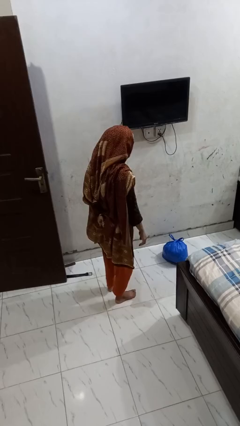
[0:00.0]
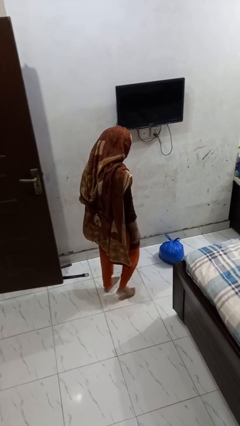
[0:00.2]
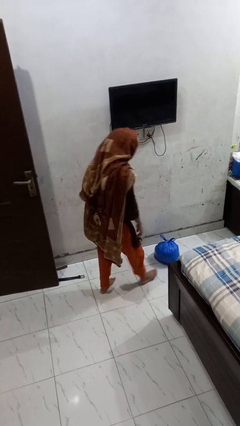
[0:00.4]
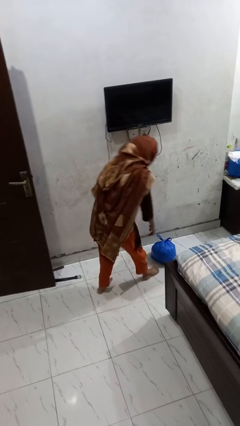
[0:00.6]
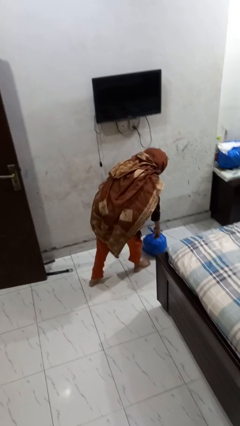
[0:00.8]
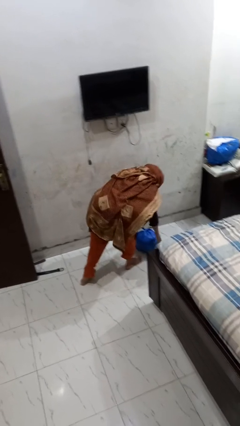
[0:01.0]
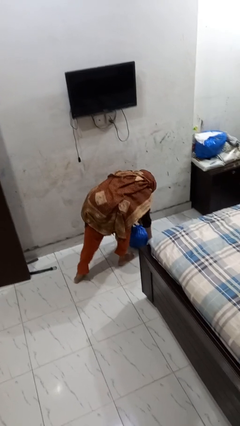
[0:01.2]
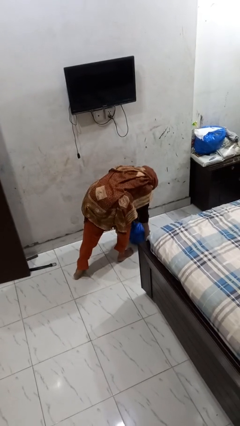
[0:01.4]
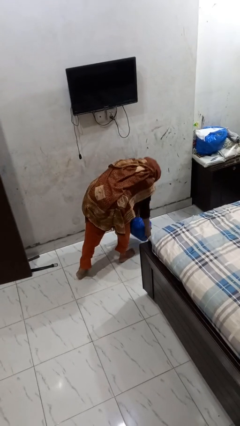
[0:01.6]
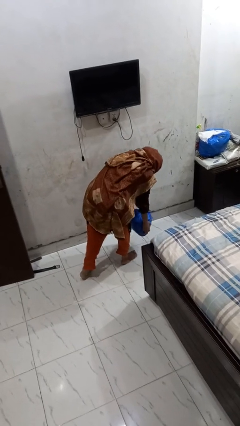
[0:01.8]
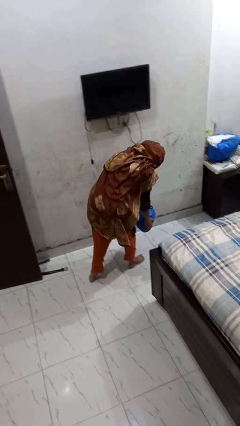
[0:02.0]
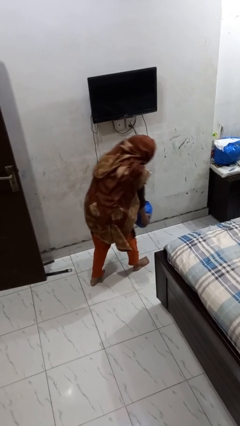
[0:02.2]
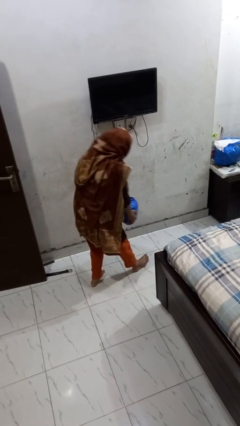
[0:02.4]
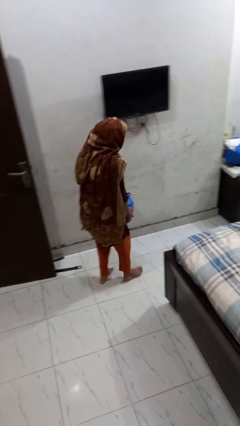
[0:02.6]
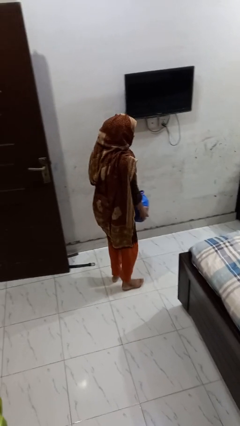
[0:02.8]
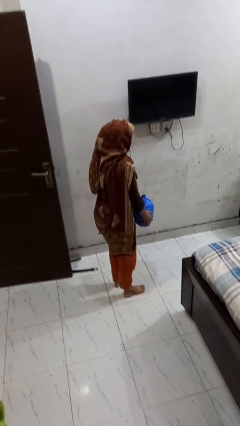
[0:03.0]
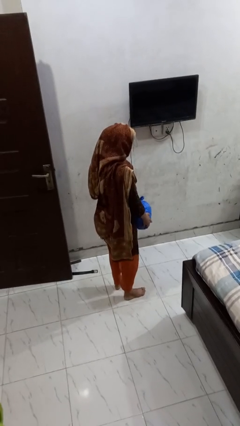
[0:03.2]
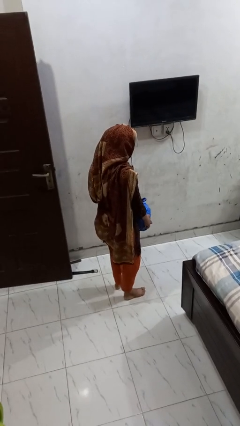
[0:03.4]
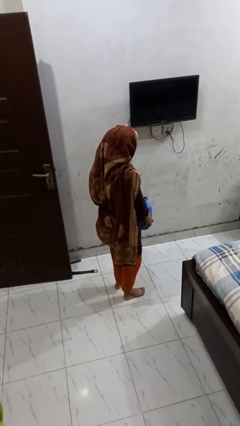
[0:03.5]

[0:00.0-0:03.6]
person picks up object from floor

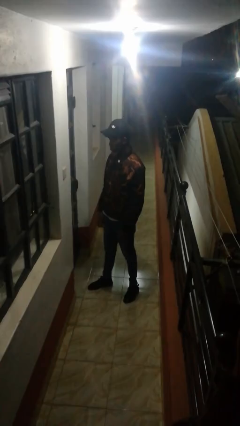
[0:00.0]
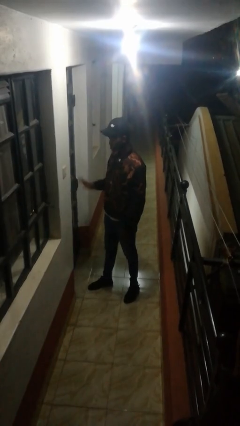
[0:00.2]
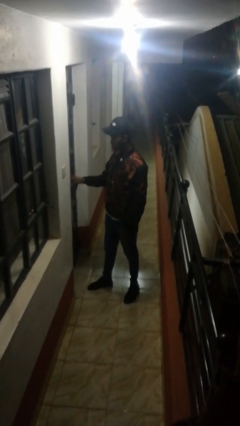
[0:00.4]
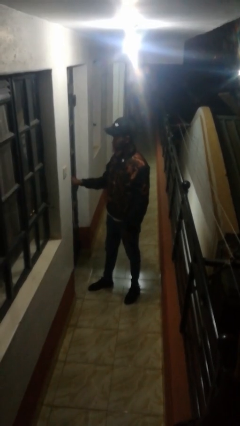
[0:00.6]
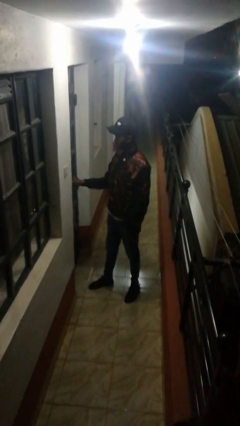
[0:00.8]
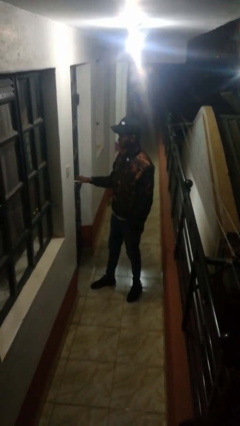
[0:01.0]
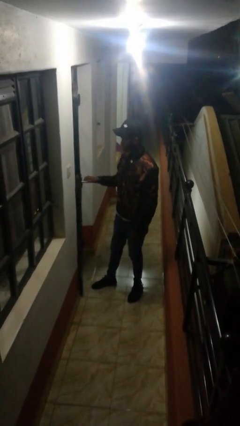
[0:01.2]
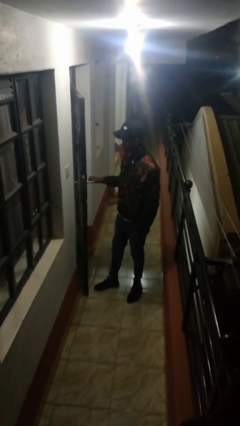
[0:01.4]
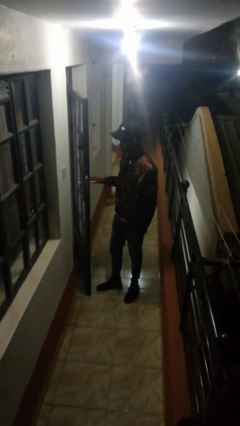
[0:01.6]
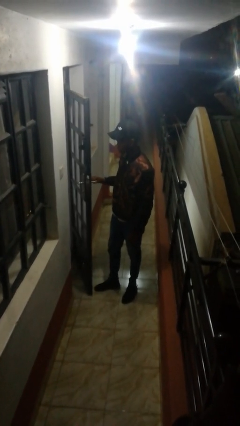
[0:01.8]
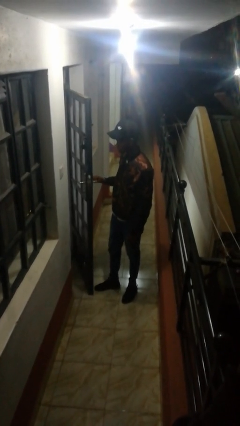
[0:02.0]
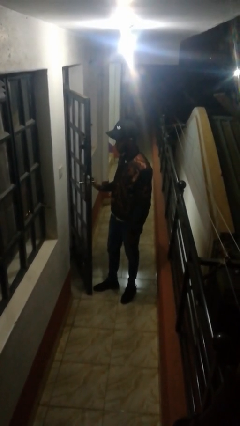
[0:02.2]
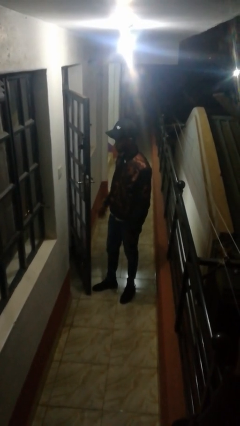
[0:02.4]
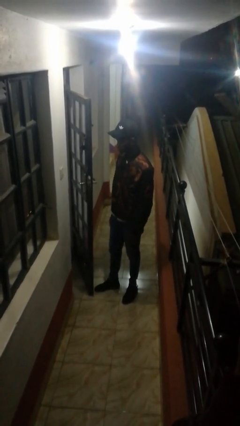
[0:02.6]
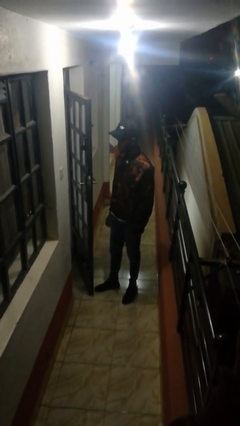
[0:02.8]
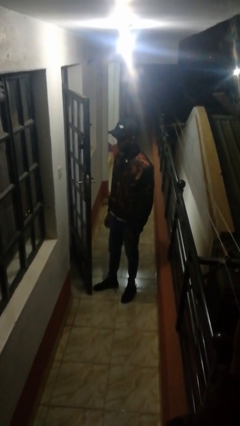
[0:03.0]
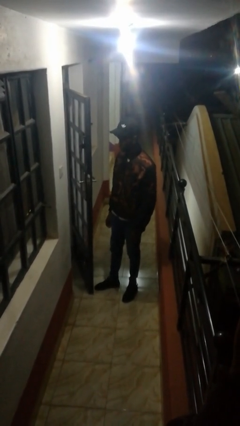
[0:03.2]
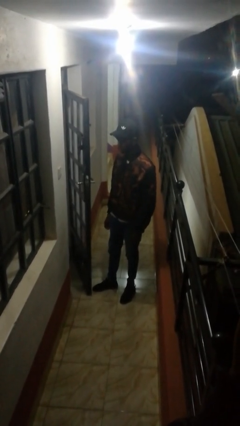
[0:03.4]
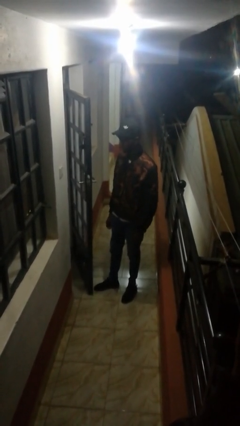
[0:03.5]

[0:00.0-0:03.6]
person opens facility door

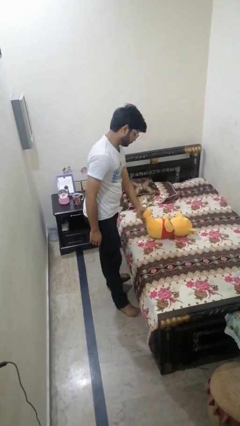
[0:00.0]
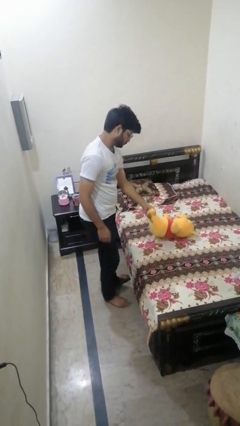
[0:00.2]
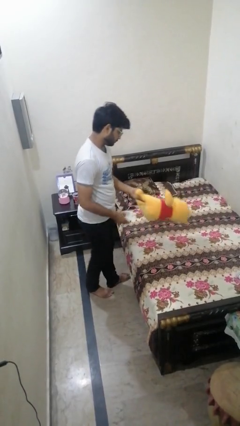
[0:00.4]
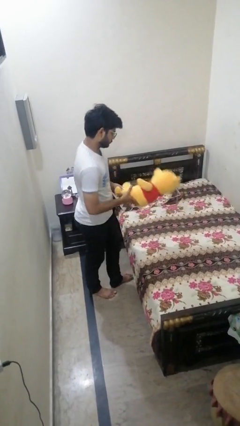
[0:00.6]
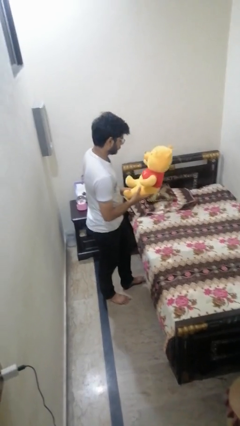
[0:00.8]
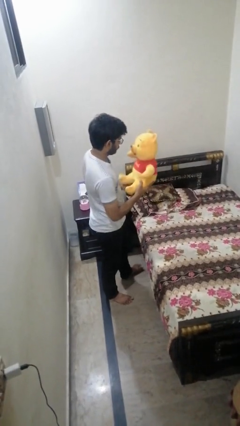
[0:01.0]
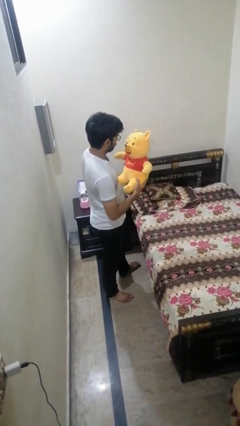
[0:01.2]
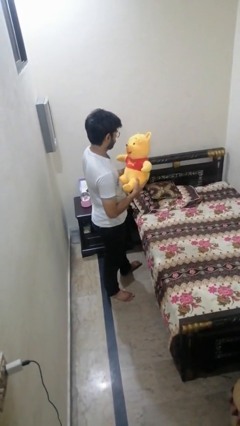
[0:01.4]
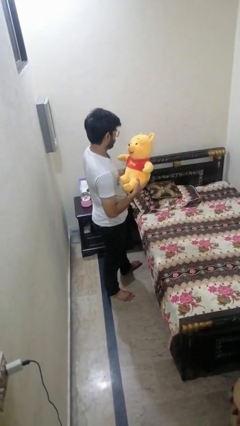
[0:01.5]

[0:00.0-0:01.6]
person picks up object from bed

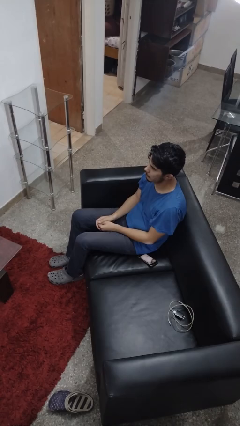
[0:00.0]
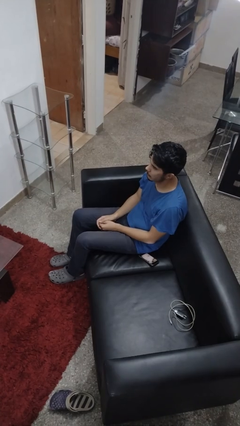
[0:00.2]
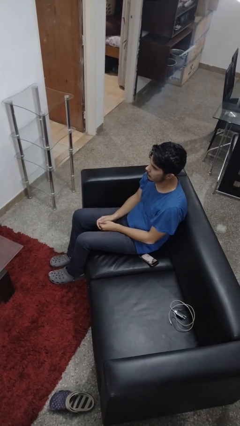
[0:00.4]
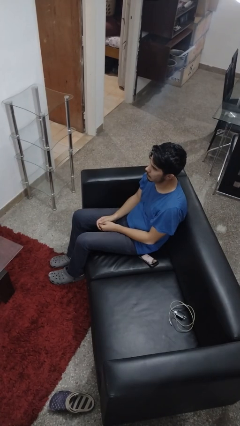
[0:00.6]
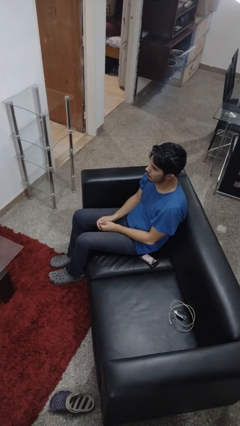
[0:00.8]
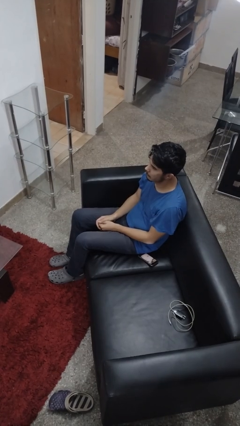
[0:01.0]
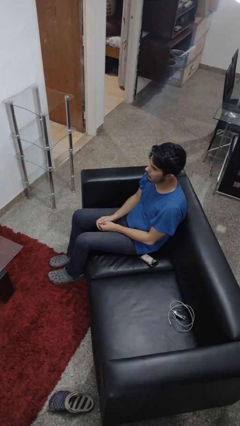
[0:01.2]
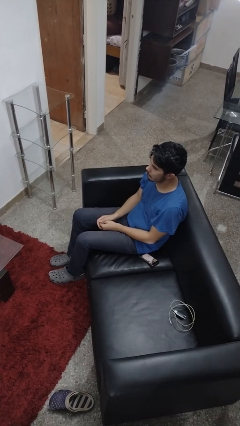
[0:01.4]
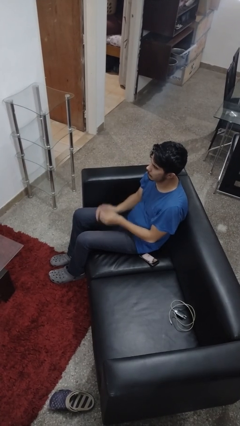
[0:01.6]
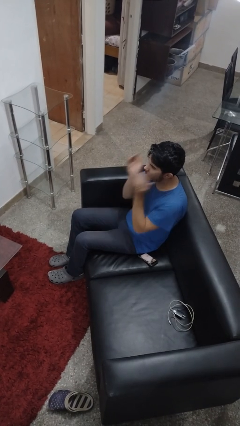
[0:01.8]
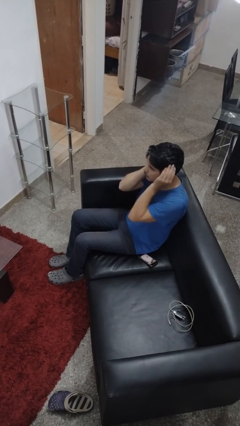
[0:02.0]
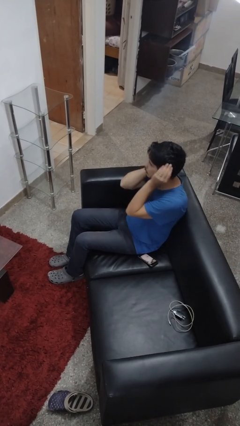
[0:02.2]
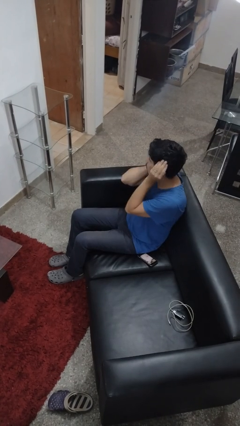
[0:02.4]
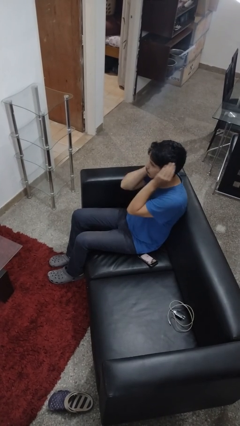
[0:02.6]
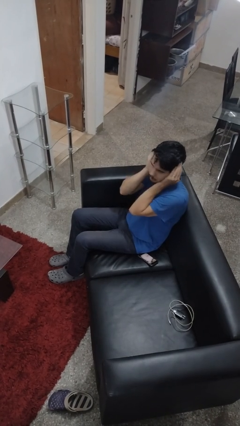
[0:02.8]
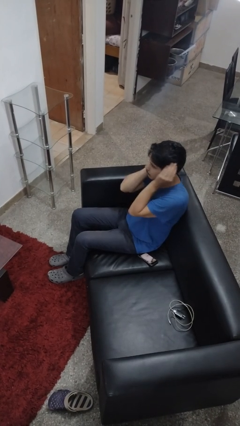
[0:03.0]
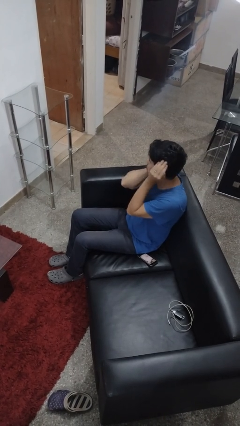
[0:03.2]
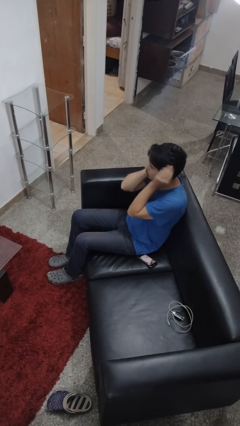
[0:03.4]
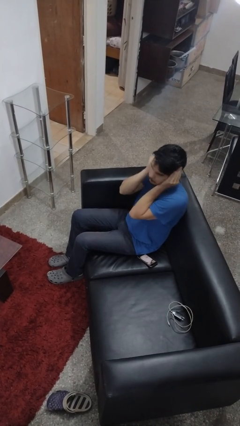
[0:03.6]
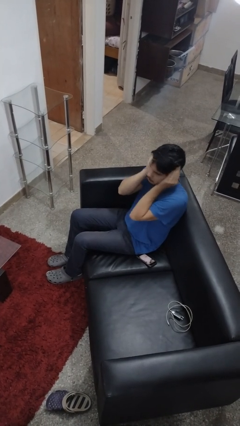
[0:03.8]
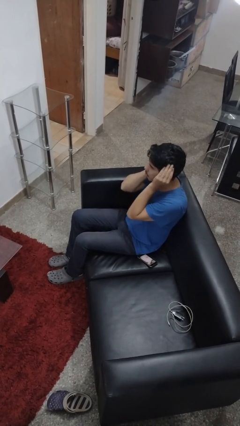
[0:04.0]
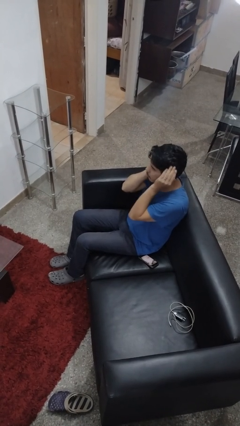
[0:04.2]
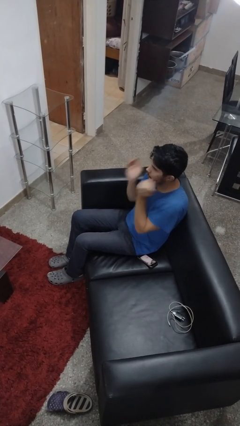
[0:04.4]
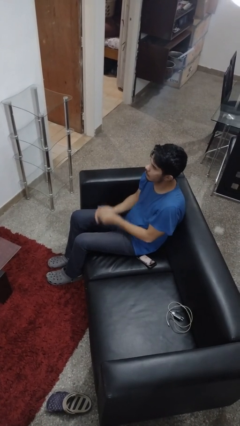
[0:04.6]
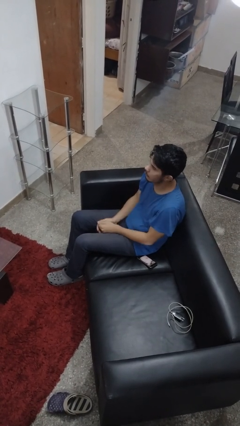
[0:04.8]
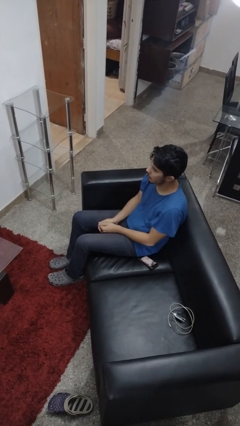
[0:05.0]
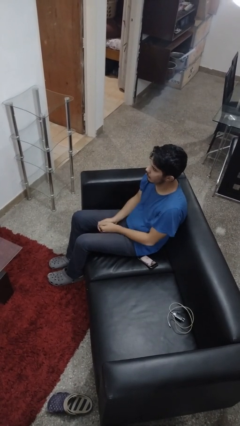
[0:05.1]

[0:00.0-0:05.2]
person puts fingers in ear

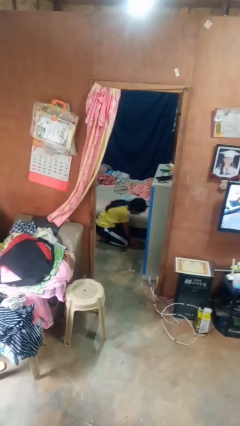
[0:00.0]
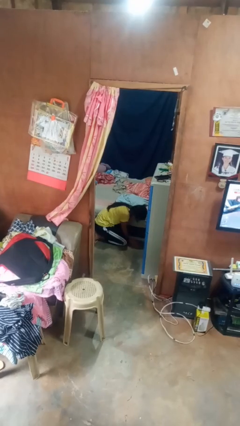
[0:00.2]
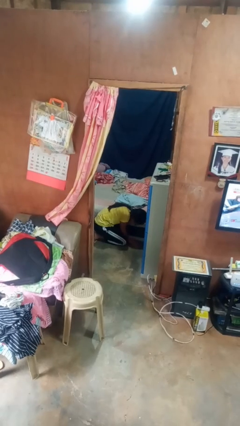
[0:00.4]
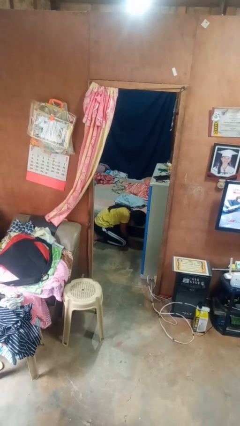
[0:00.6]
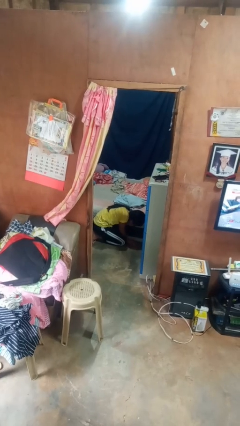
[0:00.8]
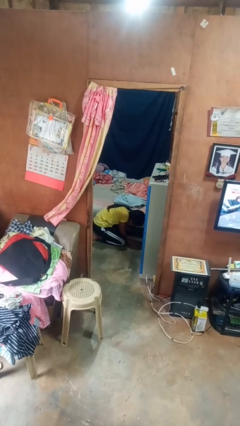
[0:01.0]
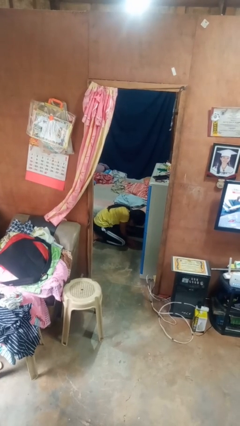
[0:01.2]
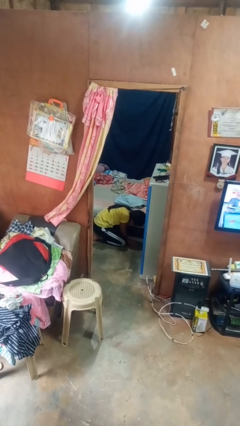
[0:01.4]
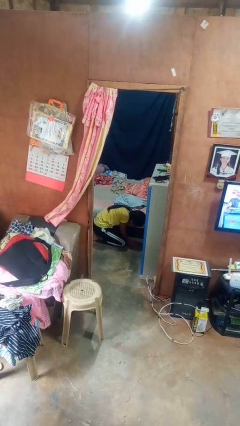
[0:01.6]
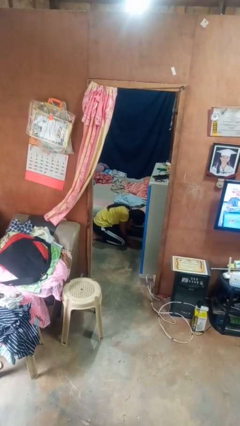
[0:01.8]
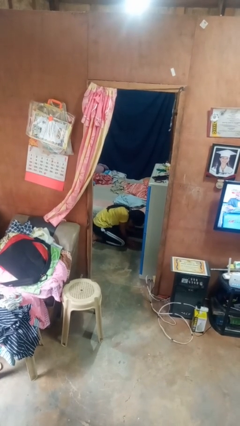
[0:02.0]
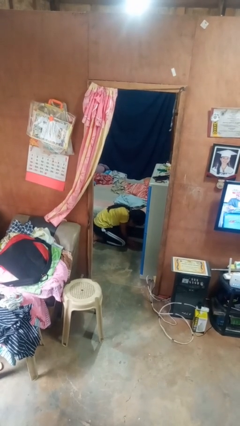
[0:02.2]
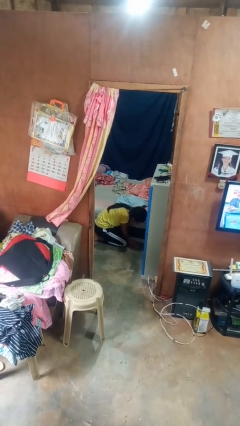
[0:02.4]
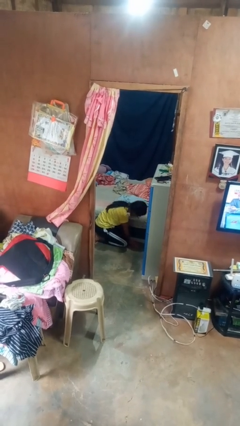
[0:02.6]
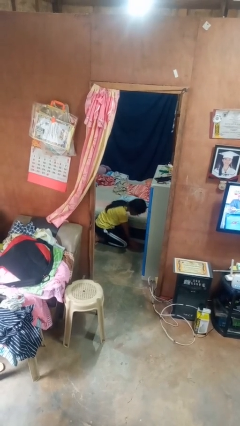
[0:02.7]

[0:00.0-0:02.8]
person searches under bed

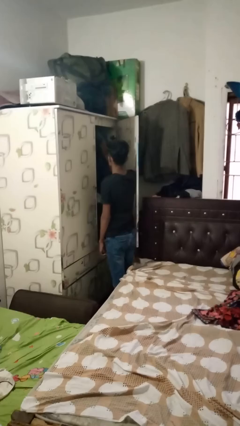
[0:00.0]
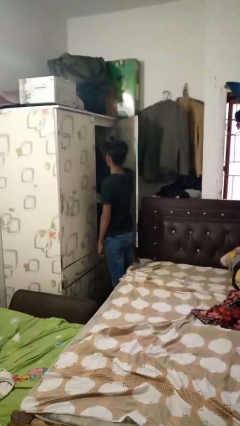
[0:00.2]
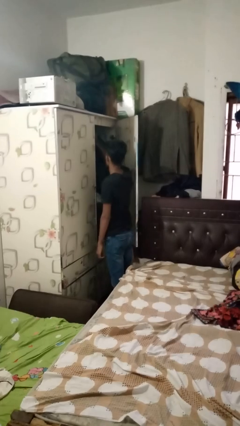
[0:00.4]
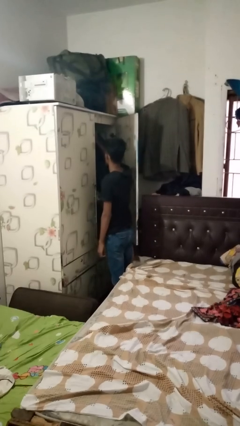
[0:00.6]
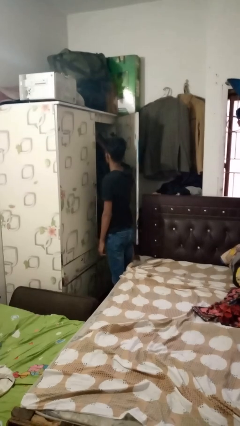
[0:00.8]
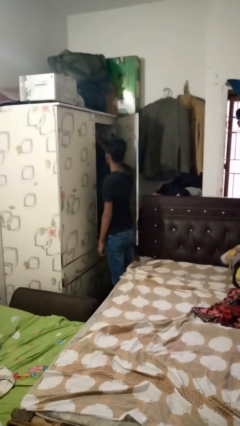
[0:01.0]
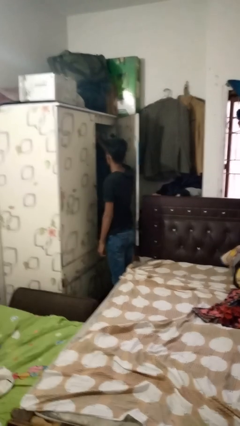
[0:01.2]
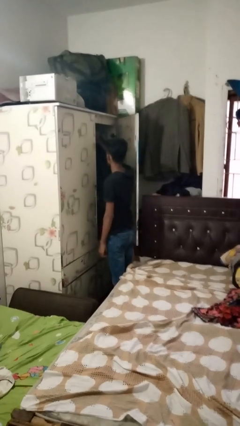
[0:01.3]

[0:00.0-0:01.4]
person puts clothes into closet
